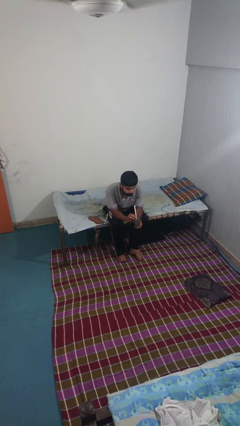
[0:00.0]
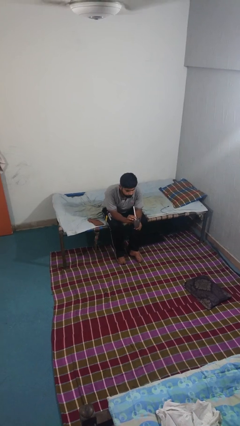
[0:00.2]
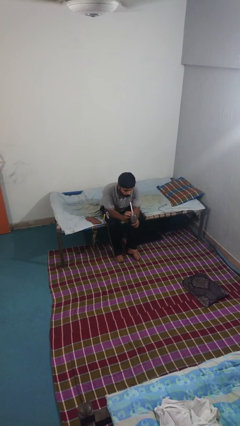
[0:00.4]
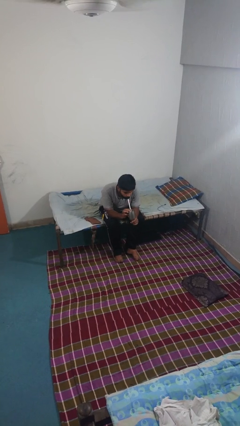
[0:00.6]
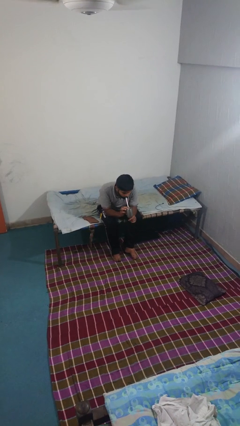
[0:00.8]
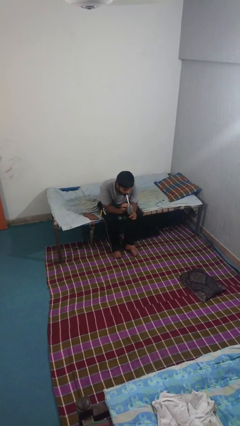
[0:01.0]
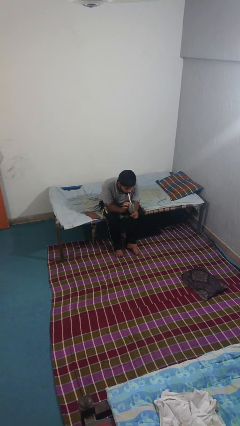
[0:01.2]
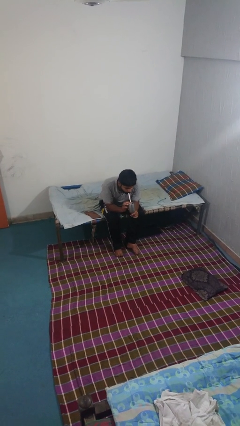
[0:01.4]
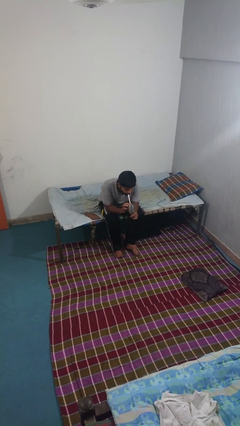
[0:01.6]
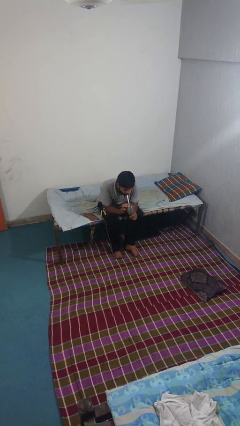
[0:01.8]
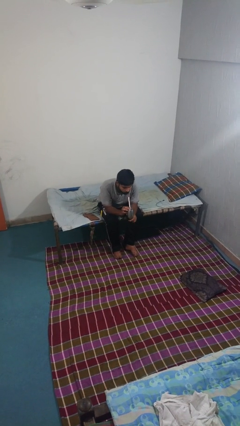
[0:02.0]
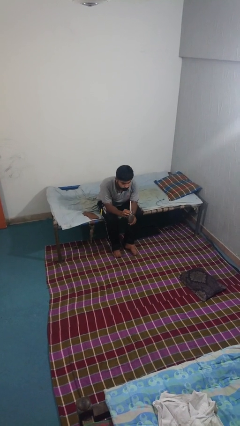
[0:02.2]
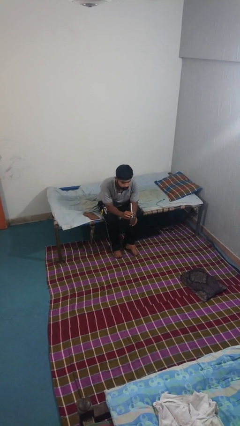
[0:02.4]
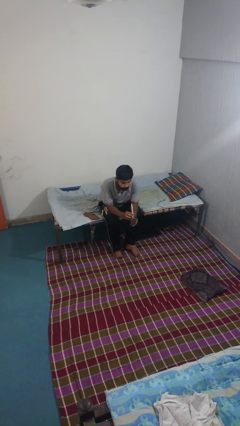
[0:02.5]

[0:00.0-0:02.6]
person drinks from straw

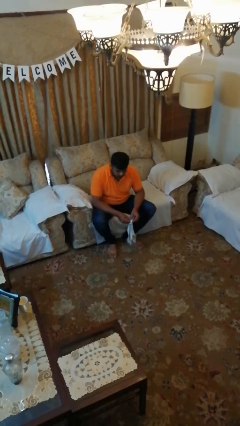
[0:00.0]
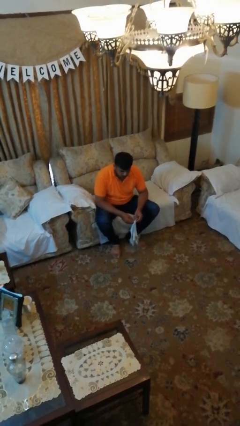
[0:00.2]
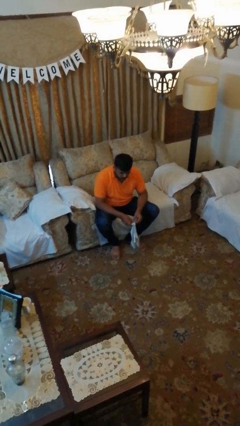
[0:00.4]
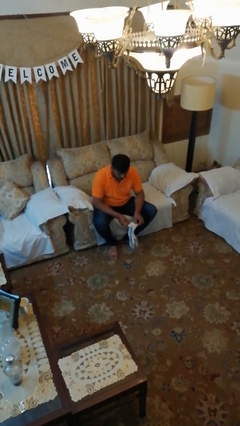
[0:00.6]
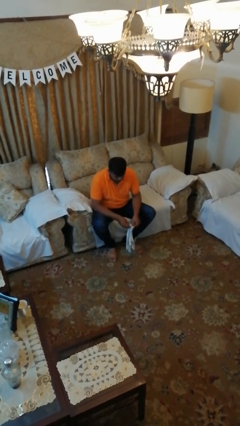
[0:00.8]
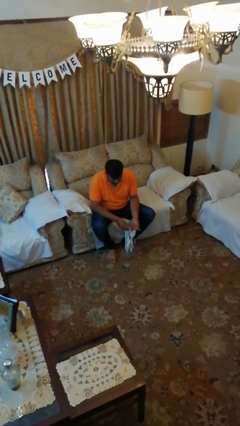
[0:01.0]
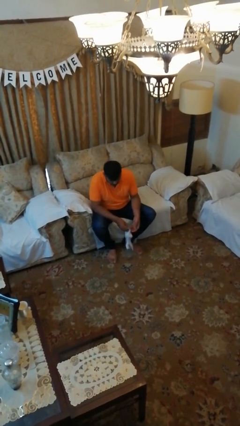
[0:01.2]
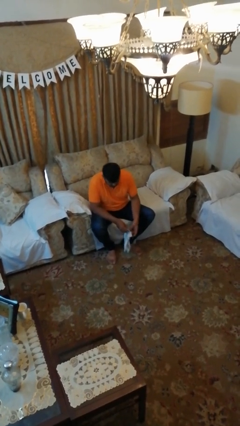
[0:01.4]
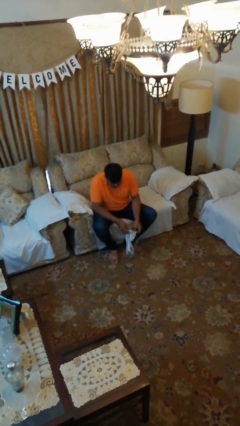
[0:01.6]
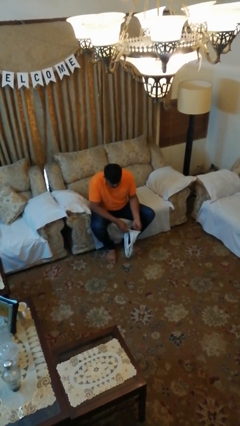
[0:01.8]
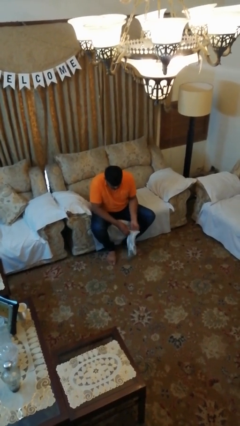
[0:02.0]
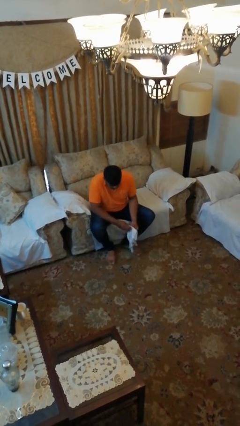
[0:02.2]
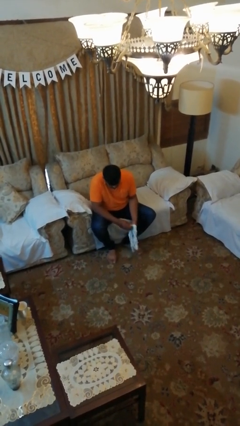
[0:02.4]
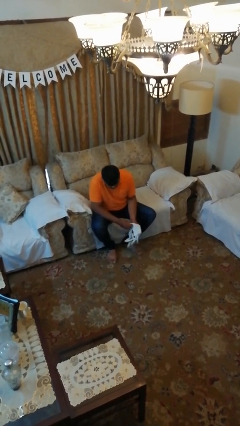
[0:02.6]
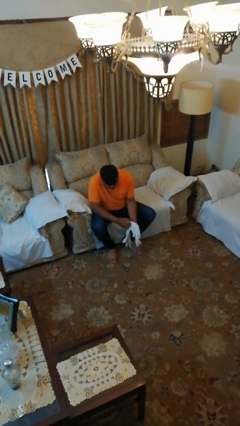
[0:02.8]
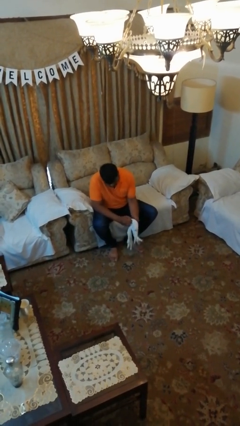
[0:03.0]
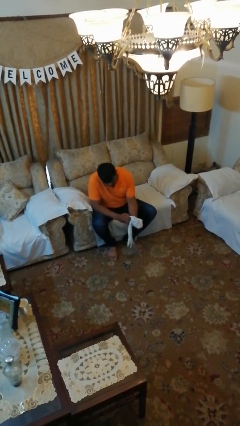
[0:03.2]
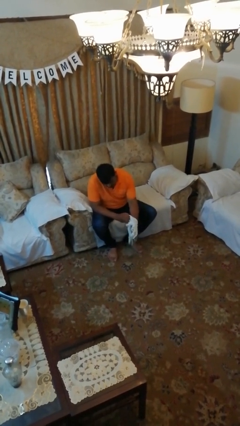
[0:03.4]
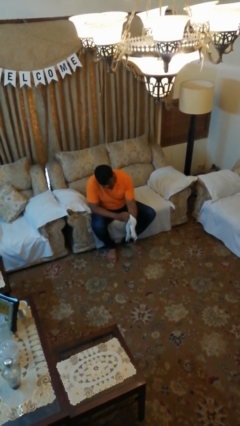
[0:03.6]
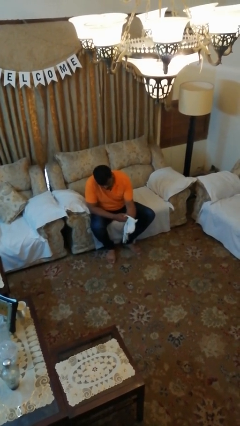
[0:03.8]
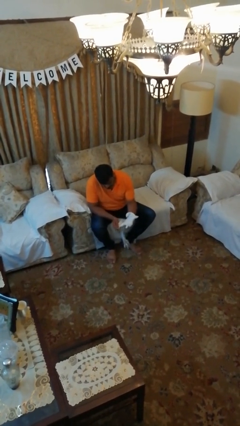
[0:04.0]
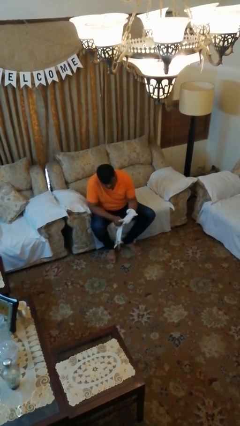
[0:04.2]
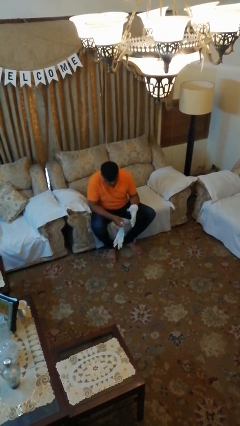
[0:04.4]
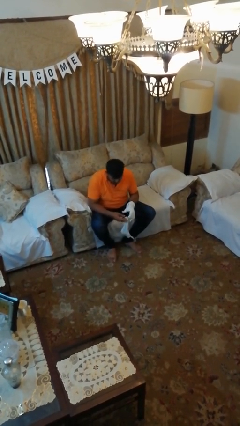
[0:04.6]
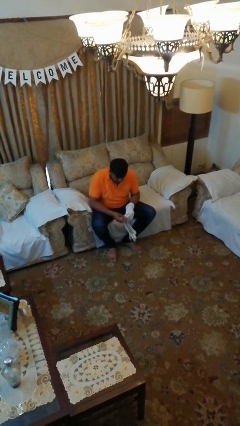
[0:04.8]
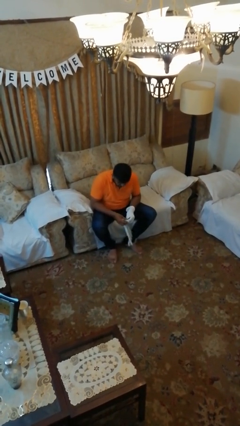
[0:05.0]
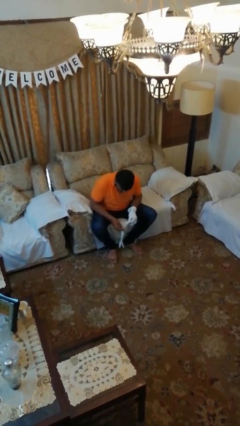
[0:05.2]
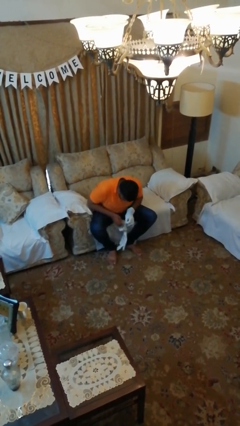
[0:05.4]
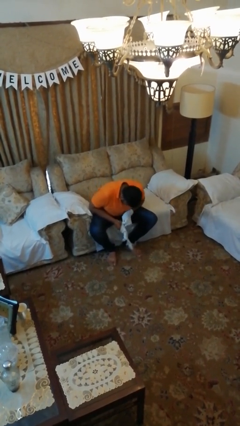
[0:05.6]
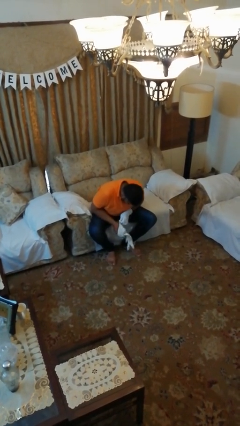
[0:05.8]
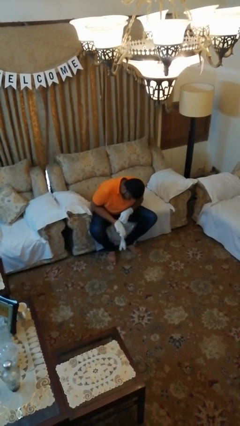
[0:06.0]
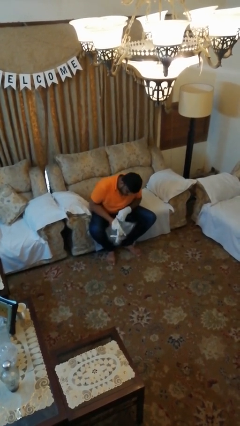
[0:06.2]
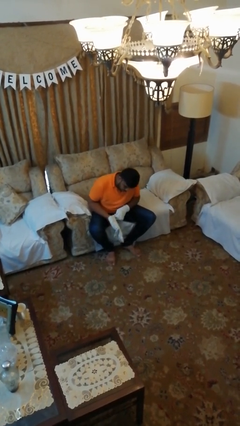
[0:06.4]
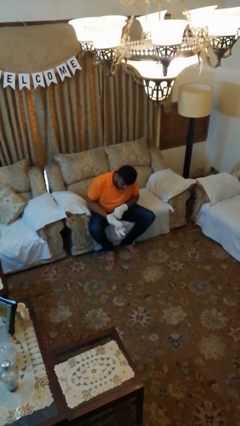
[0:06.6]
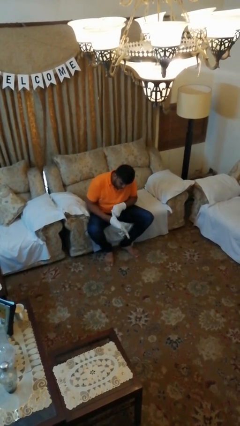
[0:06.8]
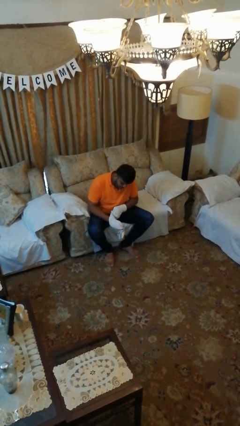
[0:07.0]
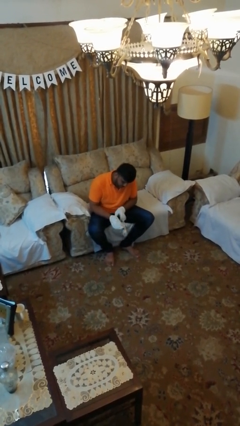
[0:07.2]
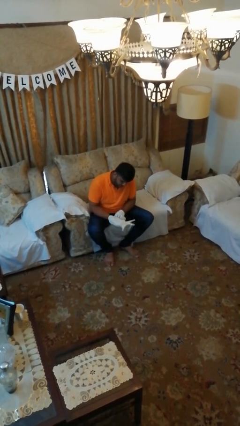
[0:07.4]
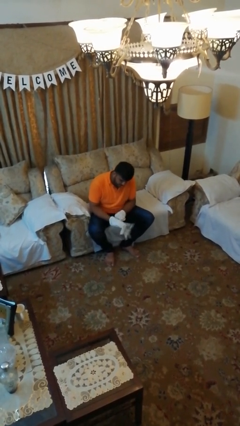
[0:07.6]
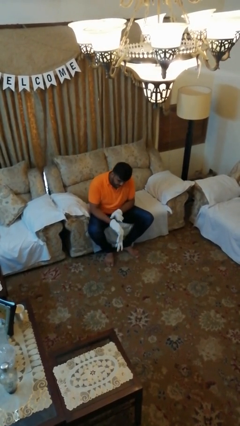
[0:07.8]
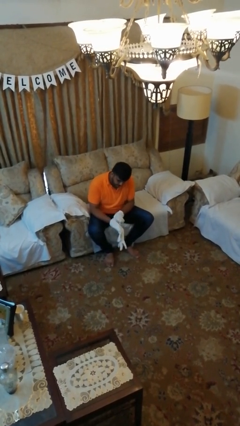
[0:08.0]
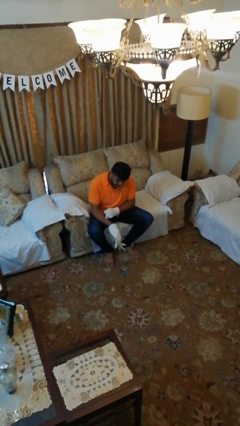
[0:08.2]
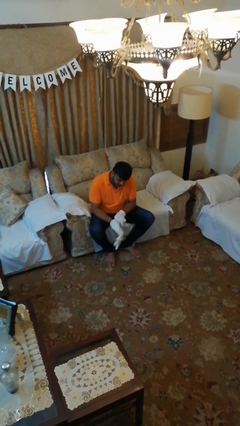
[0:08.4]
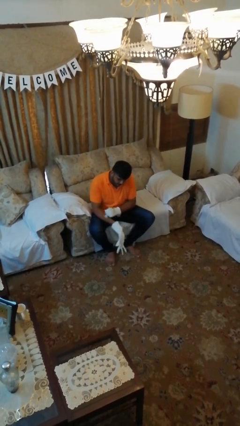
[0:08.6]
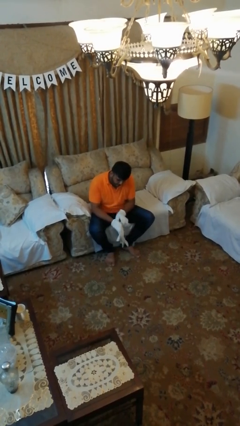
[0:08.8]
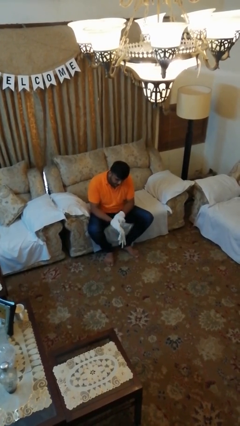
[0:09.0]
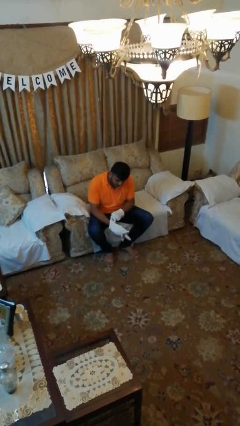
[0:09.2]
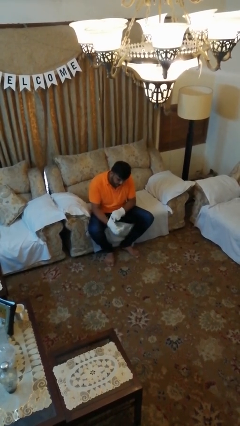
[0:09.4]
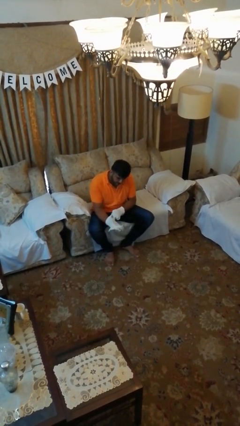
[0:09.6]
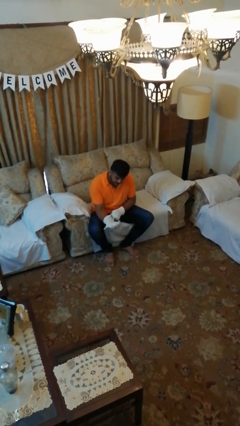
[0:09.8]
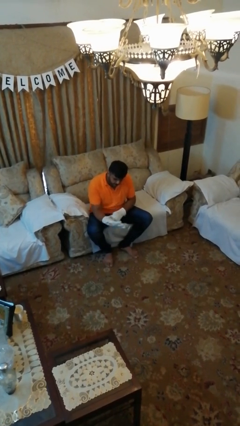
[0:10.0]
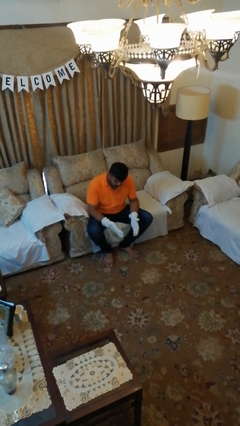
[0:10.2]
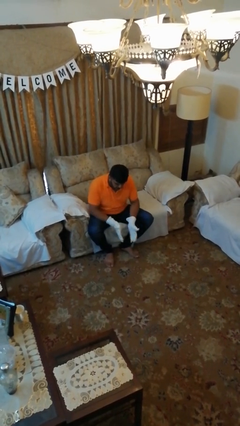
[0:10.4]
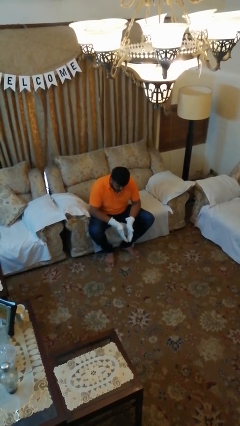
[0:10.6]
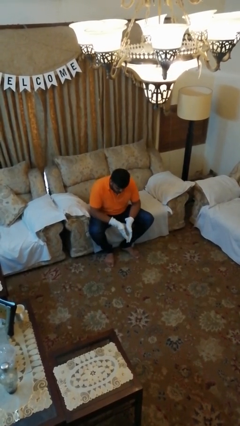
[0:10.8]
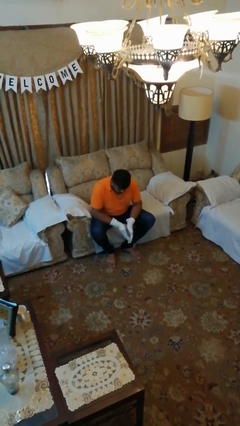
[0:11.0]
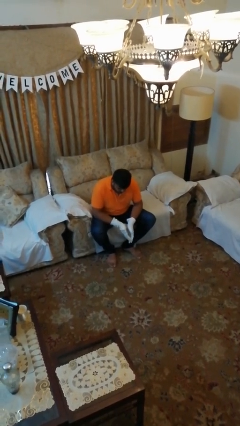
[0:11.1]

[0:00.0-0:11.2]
person puts on gloves

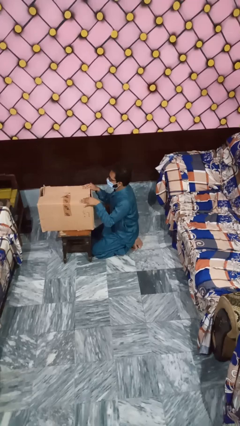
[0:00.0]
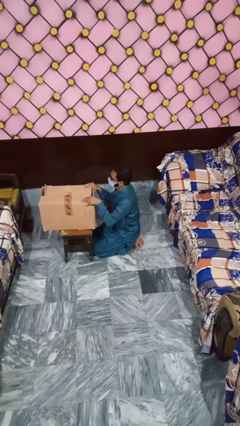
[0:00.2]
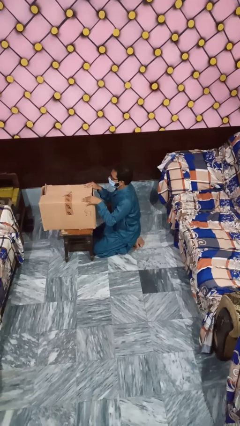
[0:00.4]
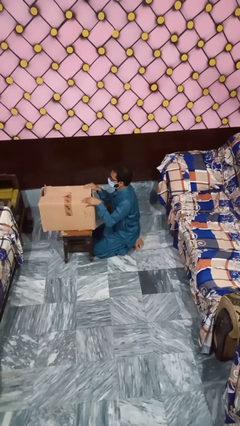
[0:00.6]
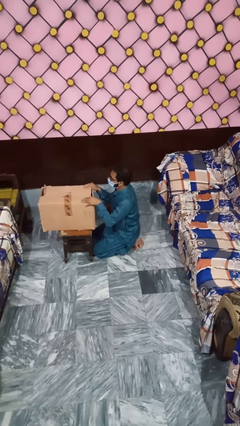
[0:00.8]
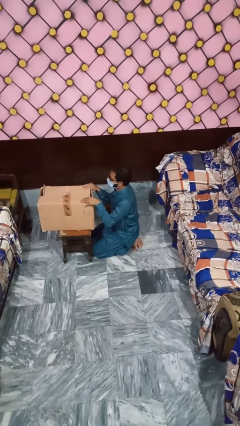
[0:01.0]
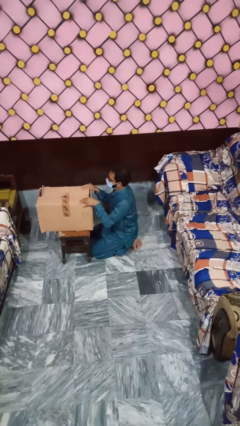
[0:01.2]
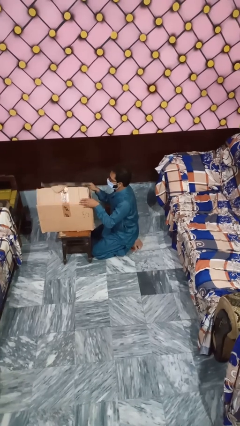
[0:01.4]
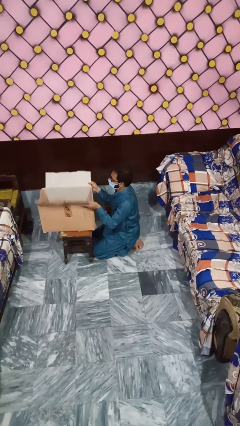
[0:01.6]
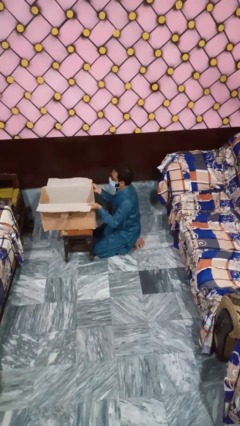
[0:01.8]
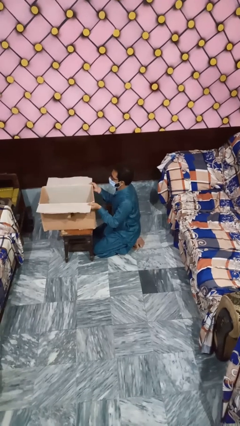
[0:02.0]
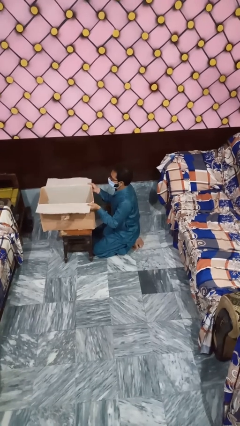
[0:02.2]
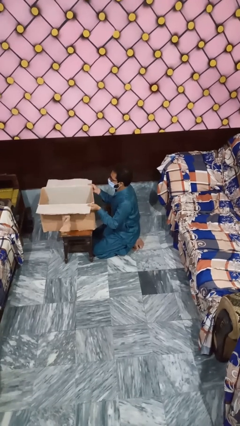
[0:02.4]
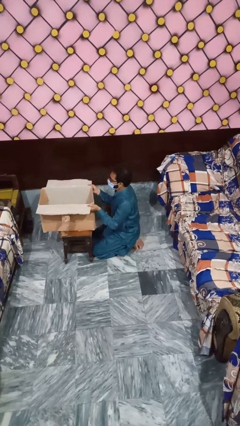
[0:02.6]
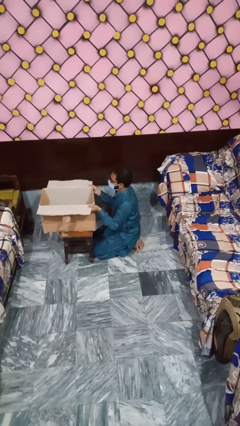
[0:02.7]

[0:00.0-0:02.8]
person opens box

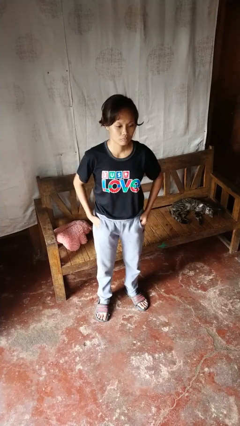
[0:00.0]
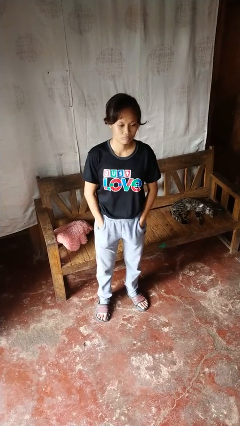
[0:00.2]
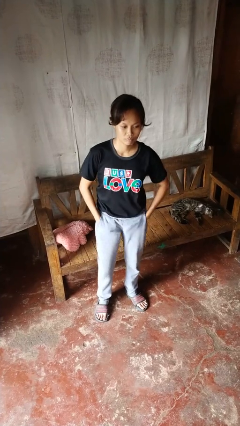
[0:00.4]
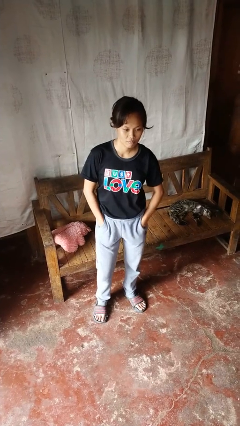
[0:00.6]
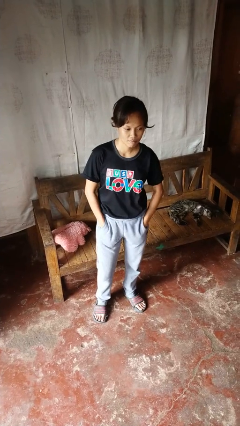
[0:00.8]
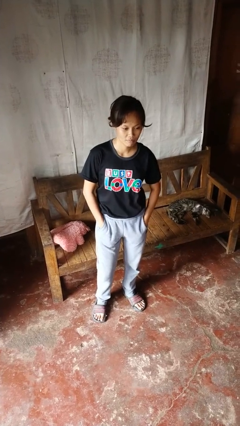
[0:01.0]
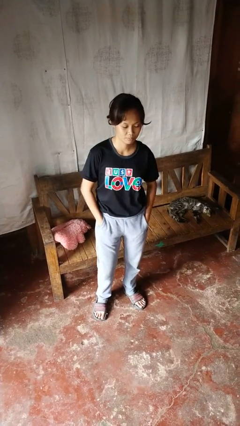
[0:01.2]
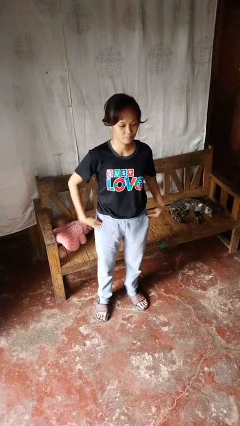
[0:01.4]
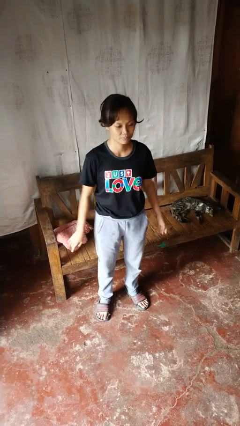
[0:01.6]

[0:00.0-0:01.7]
person puts hands in back pockets
